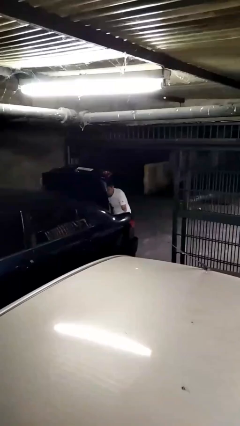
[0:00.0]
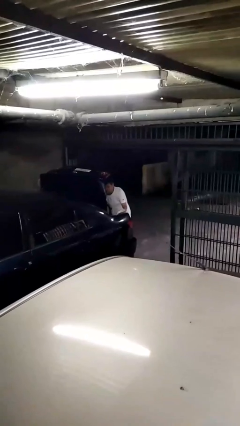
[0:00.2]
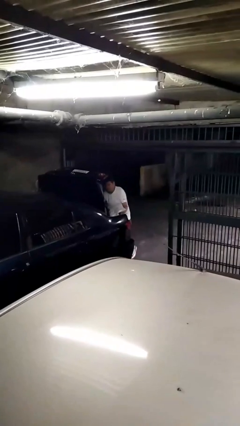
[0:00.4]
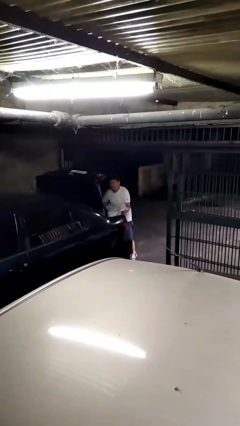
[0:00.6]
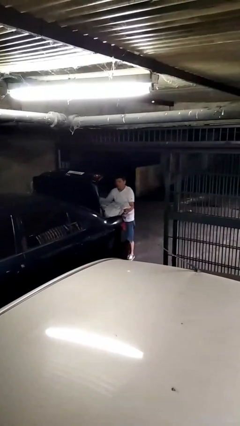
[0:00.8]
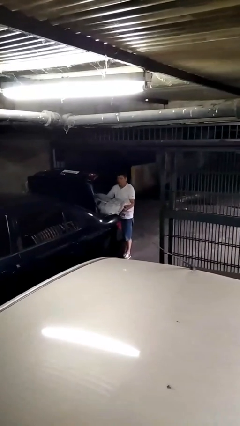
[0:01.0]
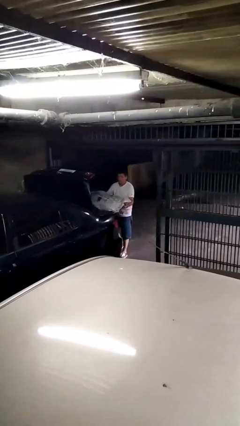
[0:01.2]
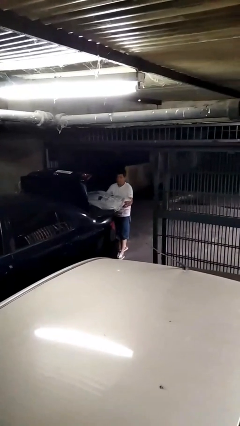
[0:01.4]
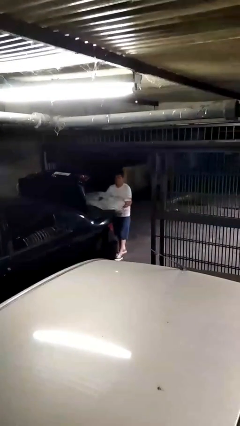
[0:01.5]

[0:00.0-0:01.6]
person unloads car

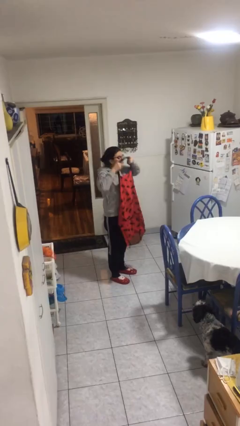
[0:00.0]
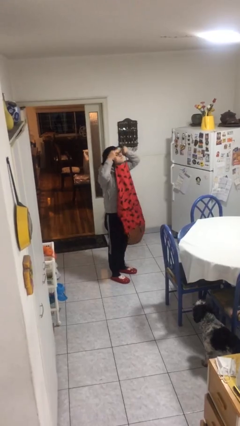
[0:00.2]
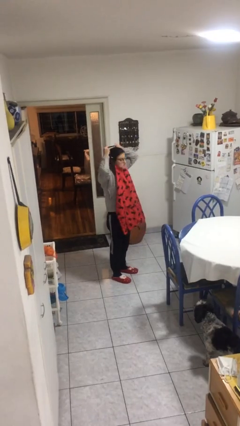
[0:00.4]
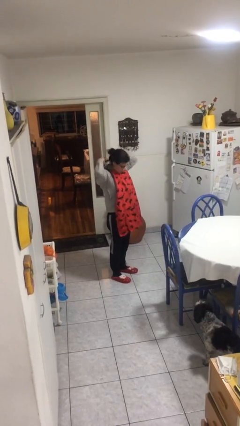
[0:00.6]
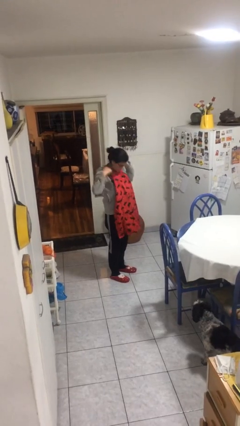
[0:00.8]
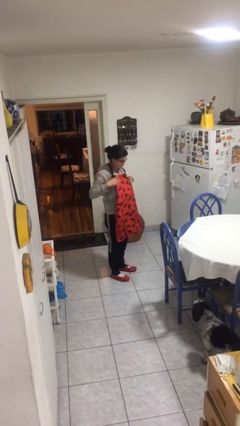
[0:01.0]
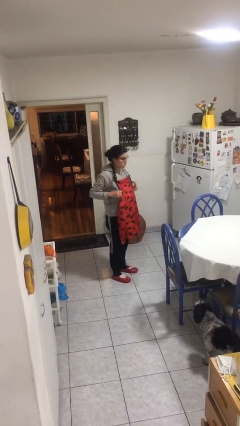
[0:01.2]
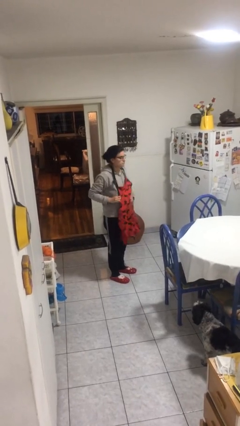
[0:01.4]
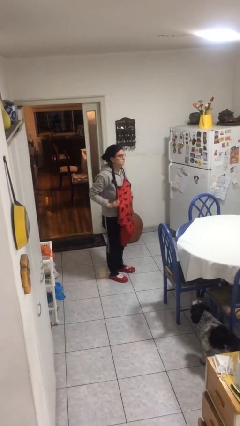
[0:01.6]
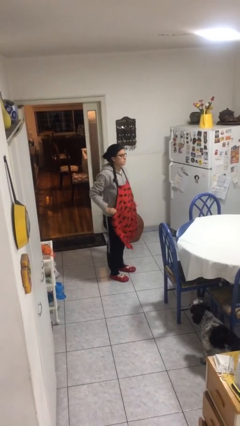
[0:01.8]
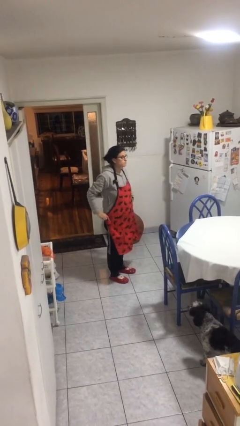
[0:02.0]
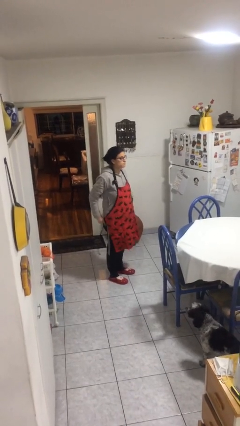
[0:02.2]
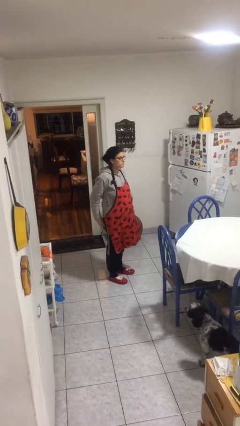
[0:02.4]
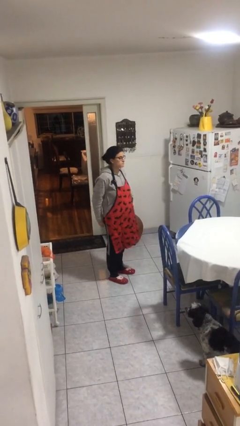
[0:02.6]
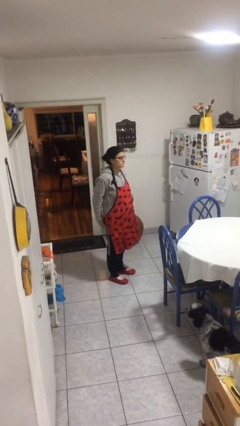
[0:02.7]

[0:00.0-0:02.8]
person puts on apron

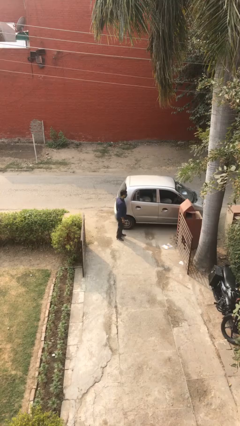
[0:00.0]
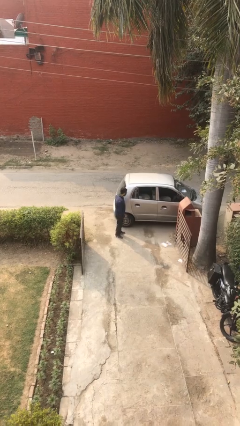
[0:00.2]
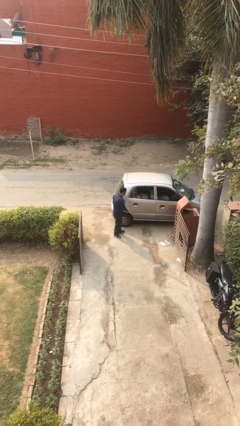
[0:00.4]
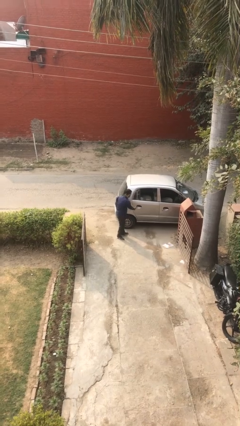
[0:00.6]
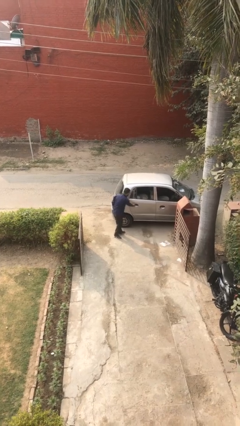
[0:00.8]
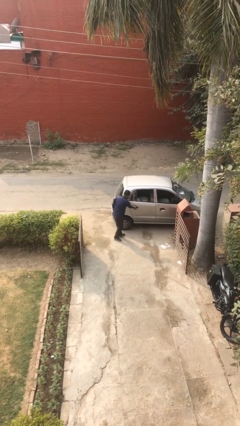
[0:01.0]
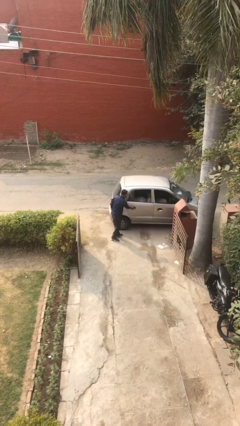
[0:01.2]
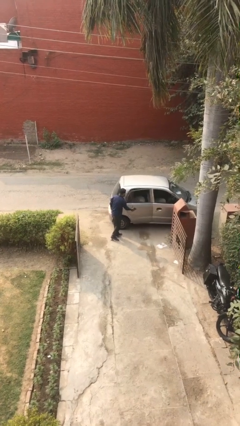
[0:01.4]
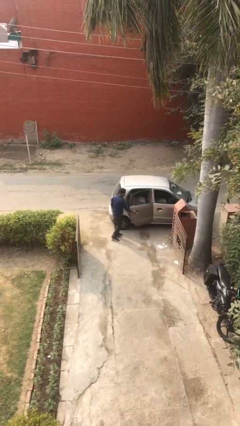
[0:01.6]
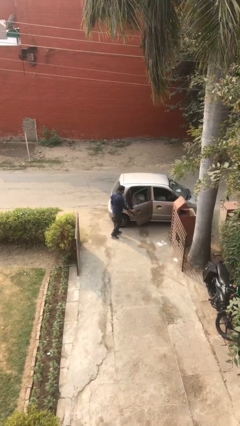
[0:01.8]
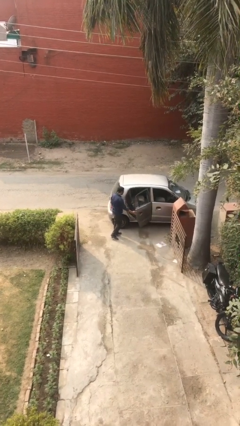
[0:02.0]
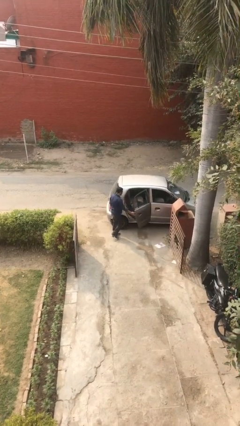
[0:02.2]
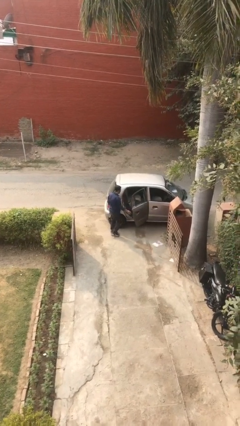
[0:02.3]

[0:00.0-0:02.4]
person opens car door

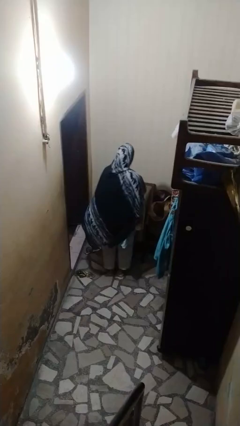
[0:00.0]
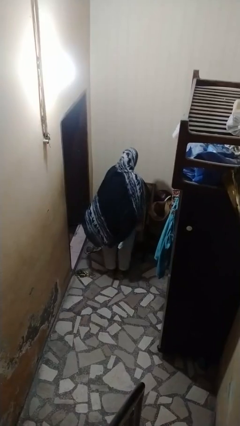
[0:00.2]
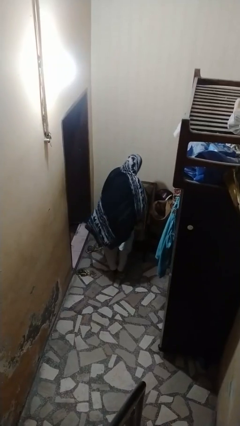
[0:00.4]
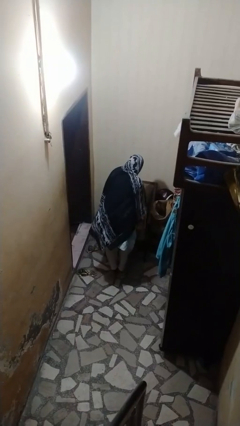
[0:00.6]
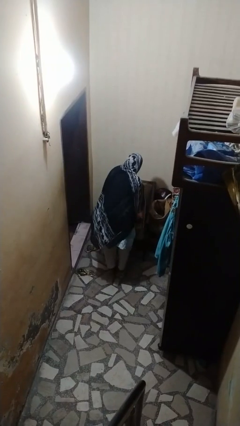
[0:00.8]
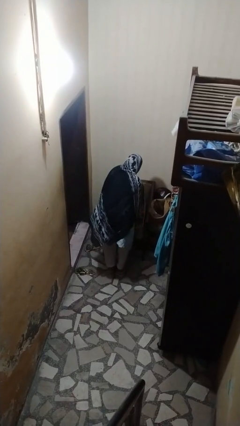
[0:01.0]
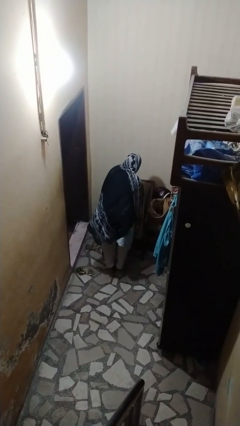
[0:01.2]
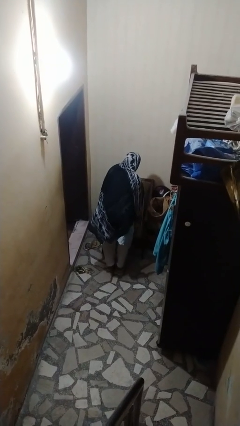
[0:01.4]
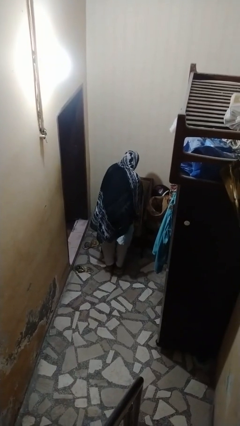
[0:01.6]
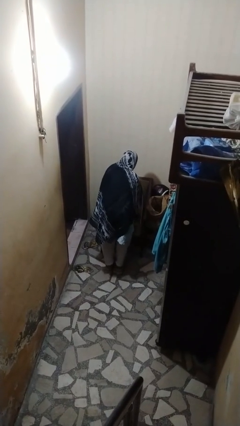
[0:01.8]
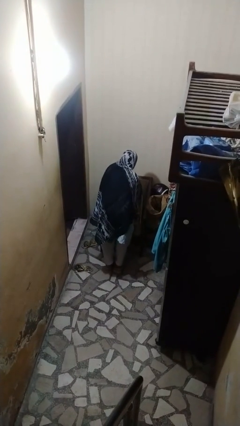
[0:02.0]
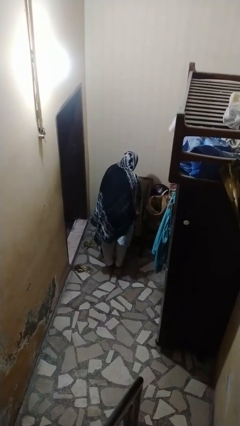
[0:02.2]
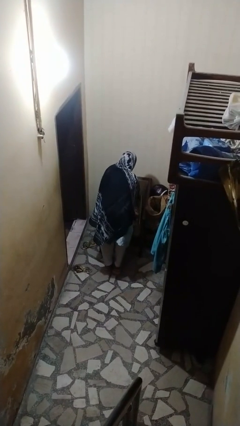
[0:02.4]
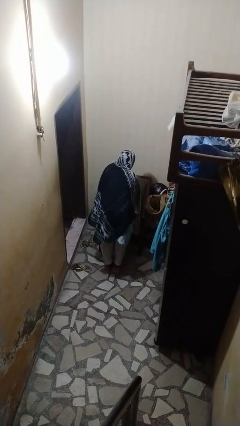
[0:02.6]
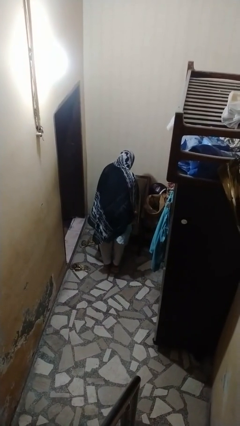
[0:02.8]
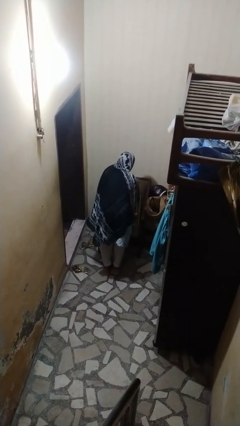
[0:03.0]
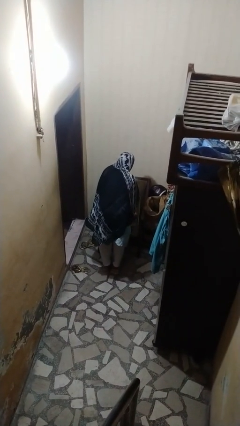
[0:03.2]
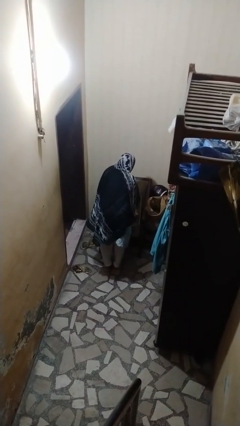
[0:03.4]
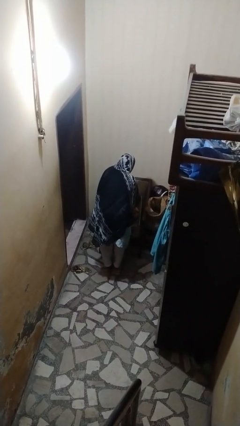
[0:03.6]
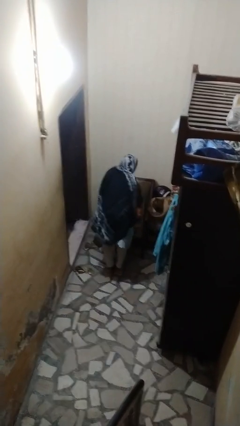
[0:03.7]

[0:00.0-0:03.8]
person searches in box

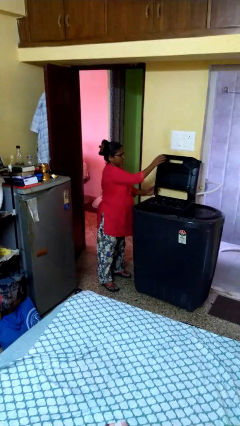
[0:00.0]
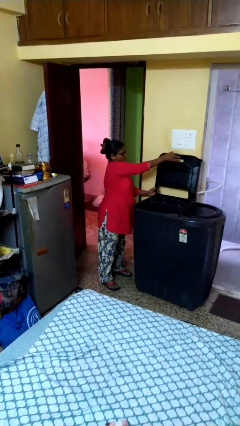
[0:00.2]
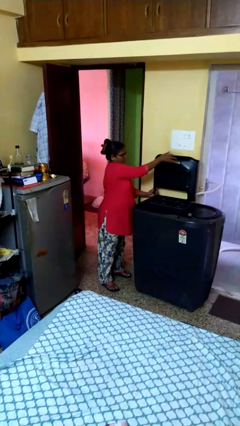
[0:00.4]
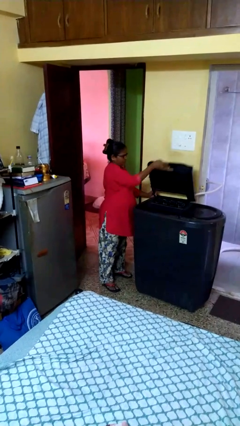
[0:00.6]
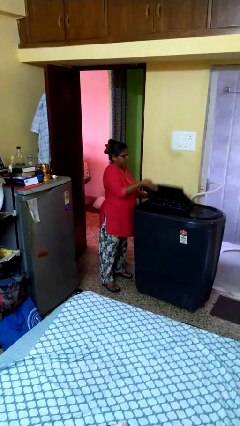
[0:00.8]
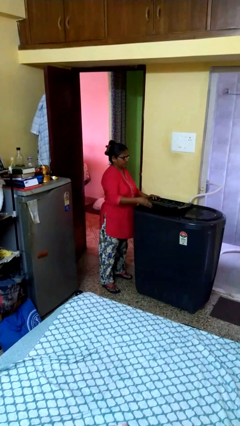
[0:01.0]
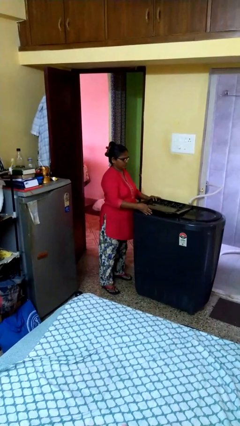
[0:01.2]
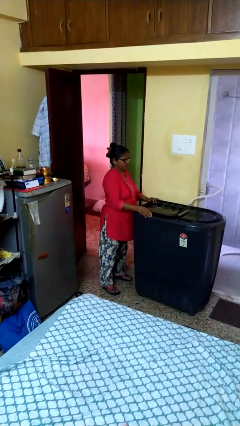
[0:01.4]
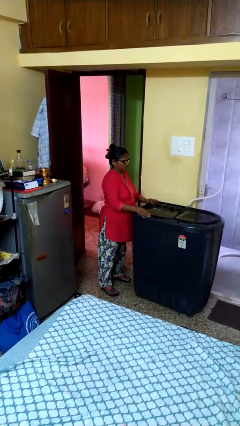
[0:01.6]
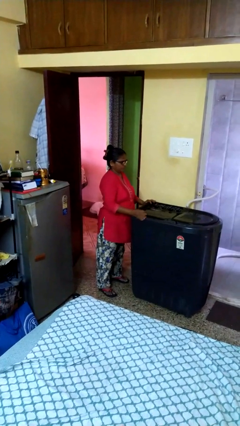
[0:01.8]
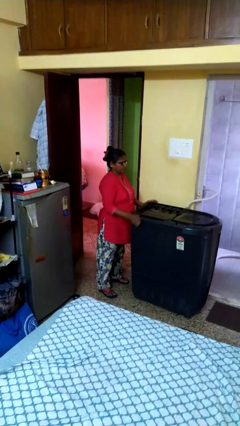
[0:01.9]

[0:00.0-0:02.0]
person closes clothes washer

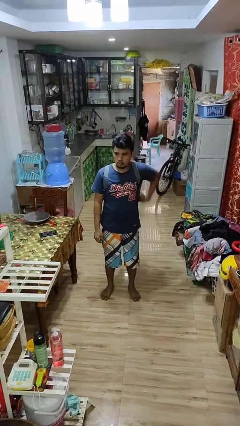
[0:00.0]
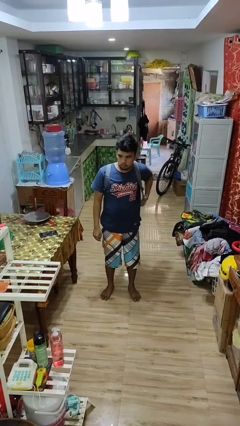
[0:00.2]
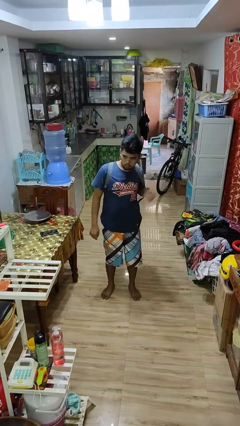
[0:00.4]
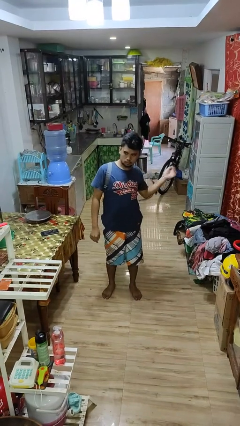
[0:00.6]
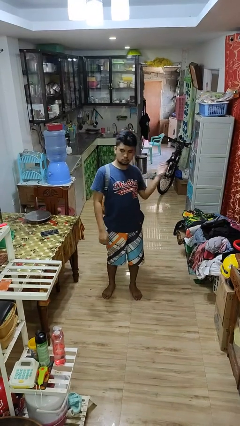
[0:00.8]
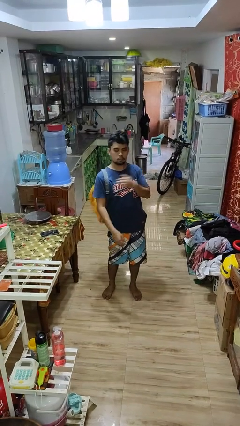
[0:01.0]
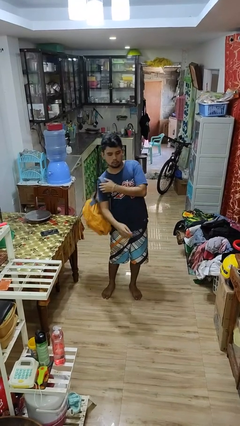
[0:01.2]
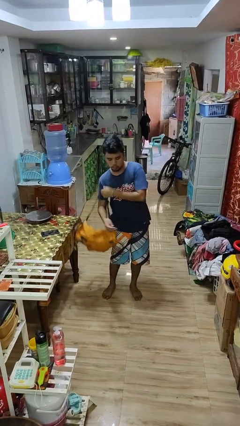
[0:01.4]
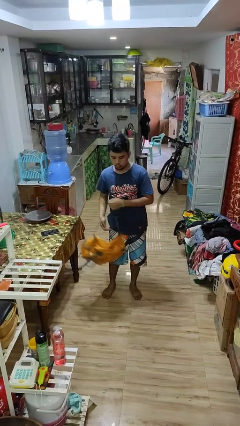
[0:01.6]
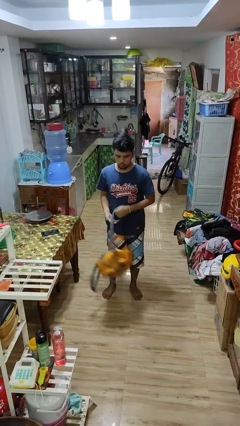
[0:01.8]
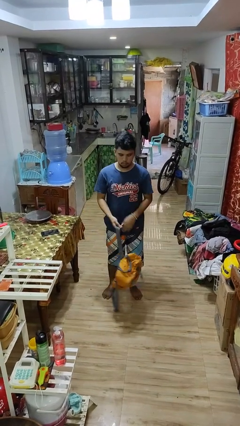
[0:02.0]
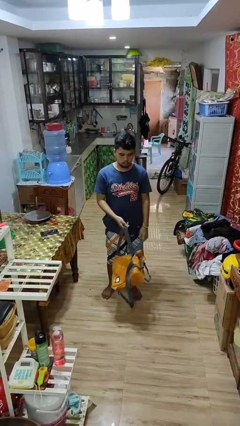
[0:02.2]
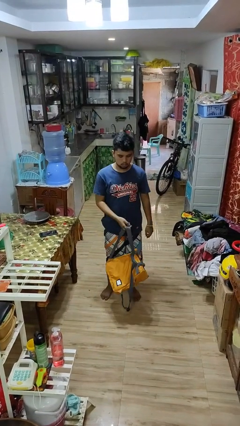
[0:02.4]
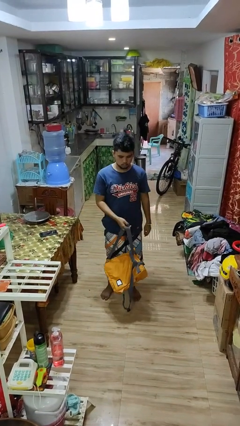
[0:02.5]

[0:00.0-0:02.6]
person takes off backpack

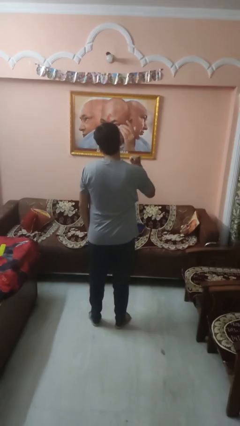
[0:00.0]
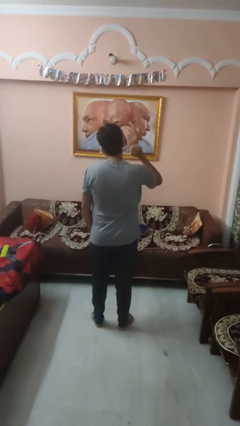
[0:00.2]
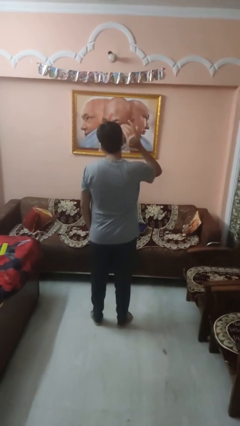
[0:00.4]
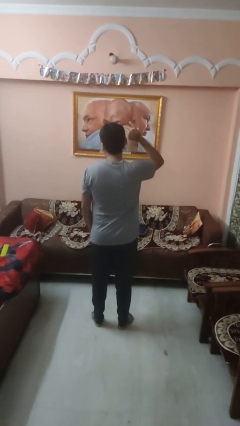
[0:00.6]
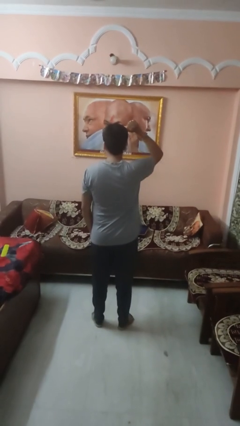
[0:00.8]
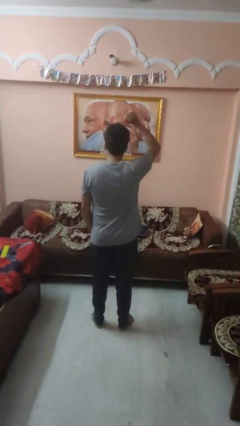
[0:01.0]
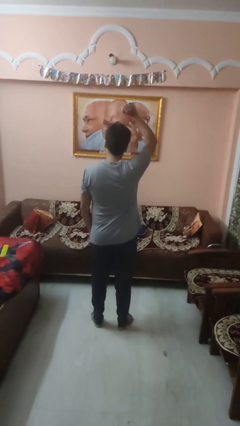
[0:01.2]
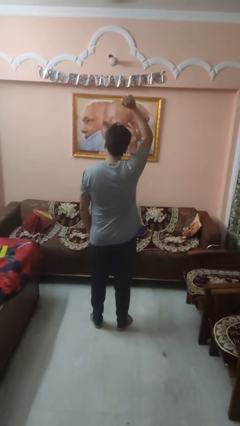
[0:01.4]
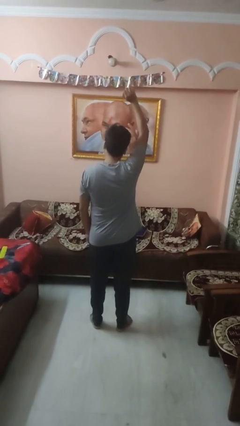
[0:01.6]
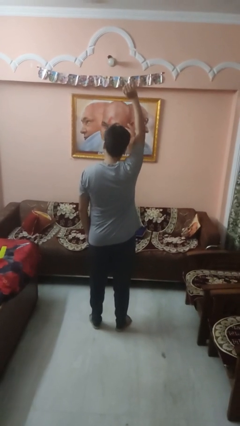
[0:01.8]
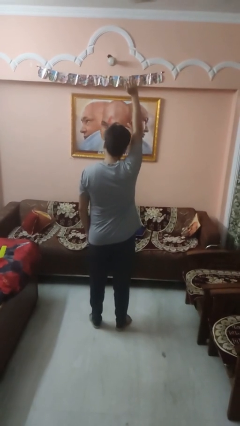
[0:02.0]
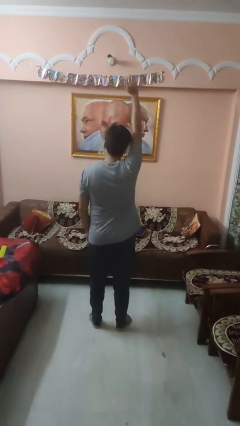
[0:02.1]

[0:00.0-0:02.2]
person gestures raise hand
